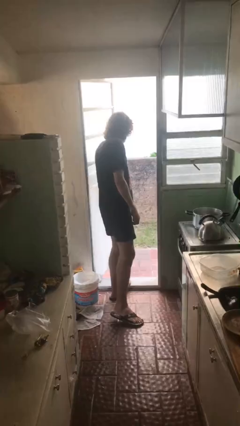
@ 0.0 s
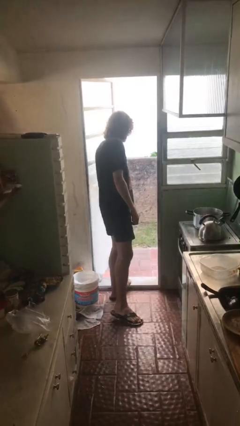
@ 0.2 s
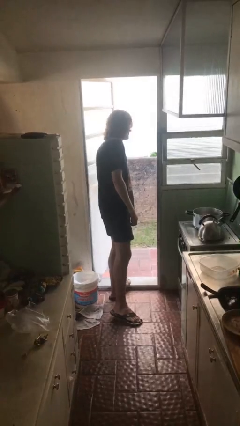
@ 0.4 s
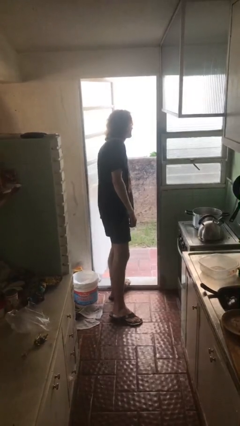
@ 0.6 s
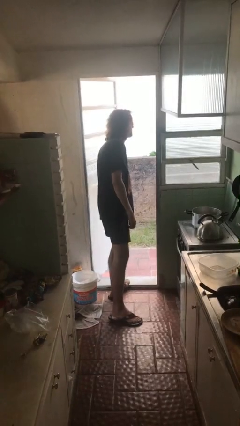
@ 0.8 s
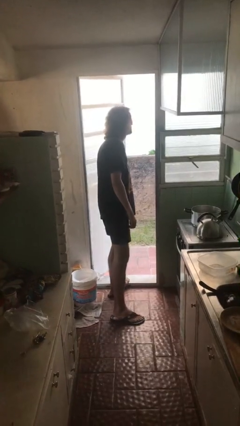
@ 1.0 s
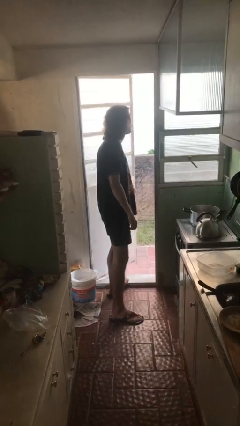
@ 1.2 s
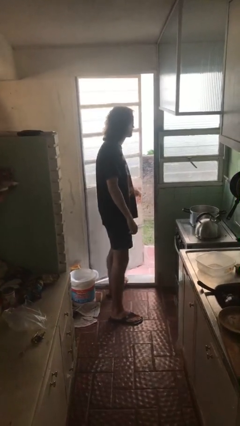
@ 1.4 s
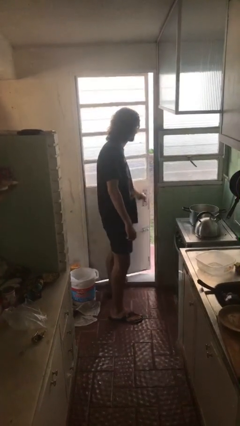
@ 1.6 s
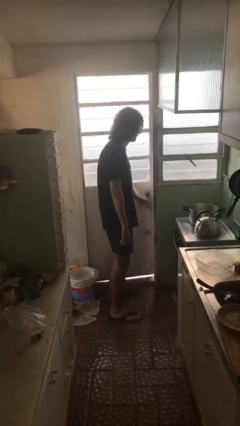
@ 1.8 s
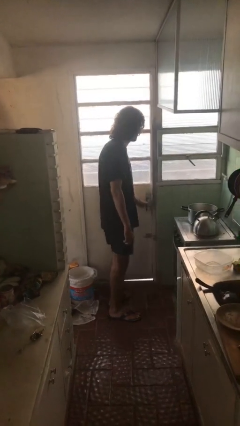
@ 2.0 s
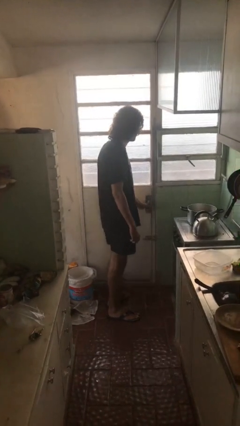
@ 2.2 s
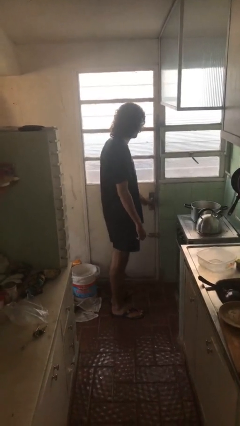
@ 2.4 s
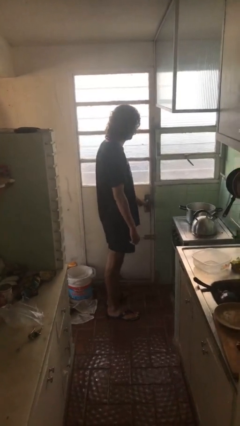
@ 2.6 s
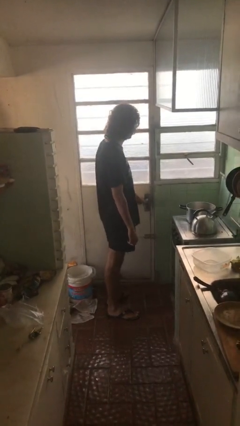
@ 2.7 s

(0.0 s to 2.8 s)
person closes facility door

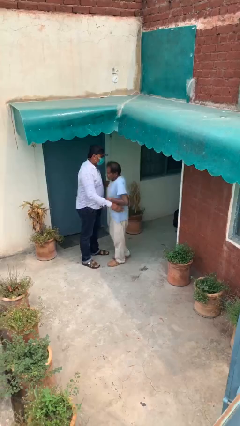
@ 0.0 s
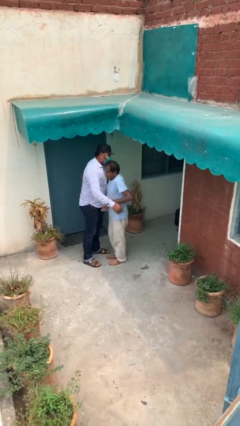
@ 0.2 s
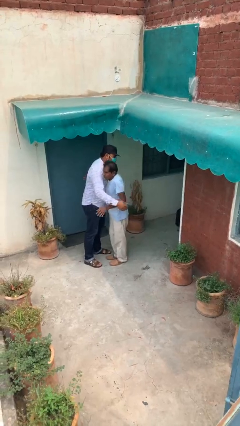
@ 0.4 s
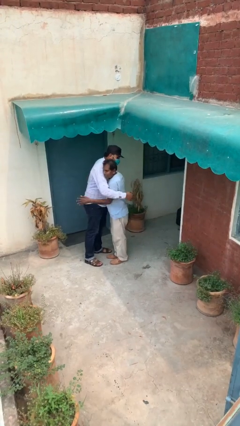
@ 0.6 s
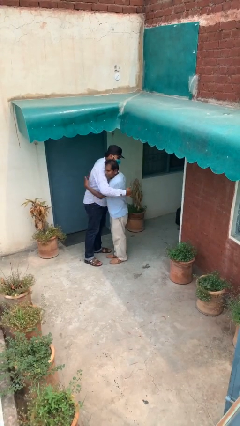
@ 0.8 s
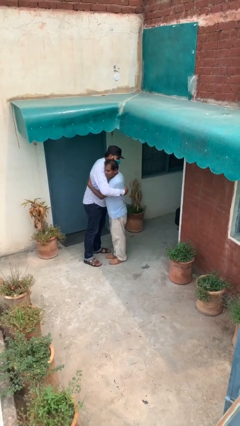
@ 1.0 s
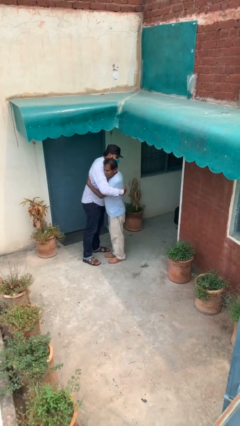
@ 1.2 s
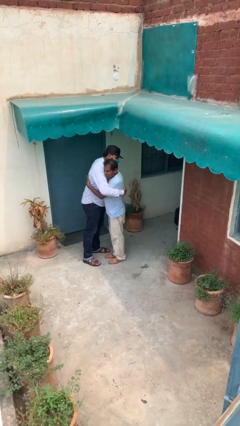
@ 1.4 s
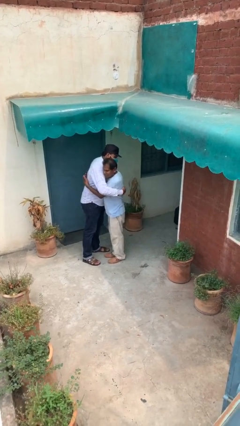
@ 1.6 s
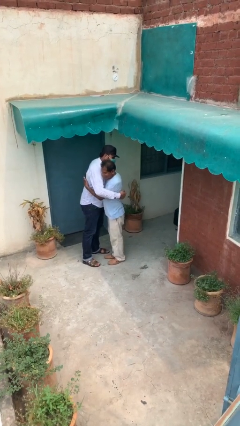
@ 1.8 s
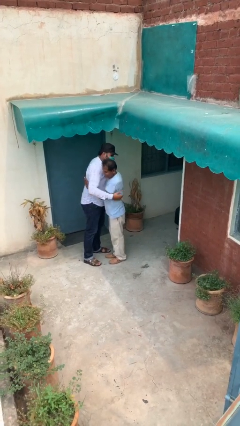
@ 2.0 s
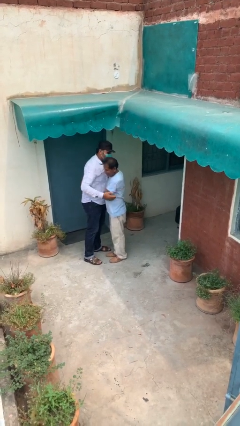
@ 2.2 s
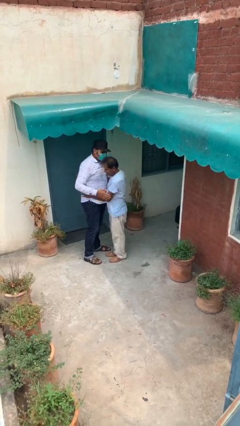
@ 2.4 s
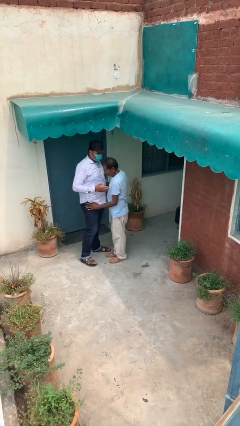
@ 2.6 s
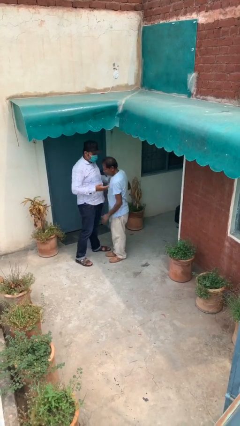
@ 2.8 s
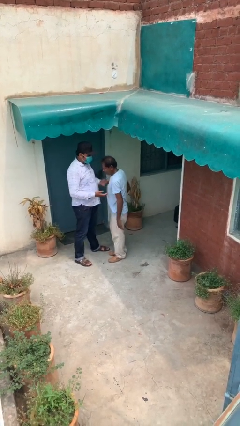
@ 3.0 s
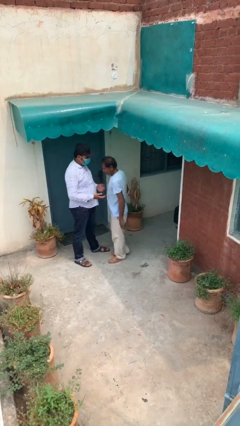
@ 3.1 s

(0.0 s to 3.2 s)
person embraces person

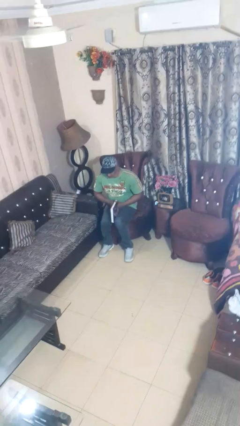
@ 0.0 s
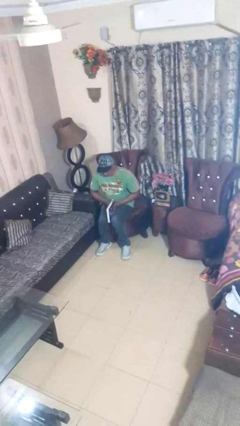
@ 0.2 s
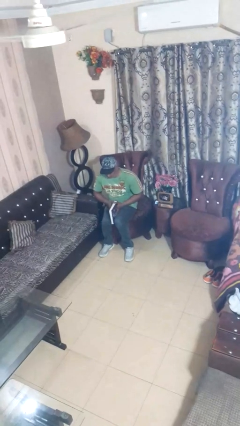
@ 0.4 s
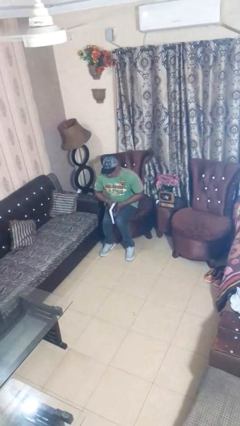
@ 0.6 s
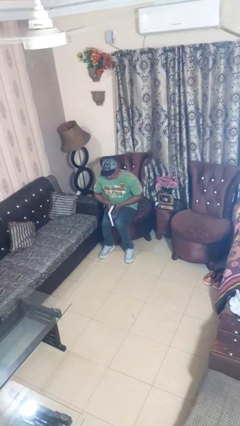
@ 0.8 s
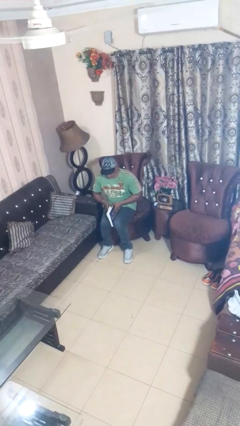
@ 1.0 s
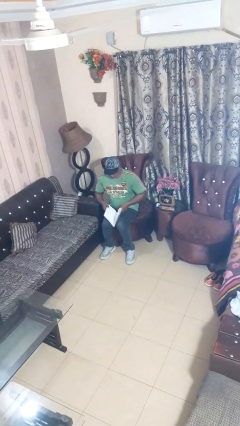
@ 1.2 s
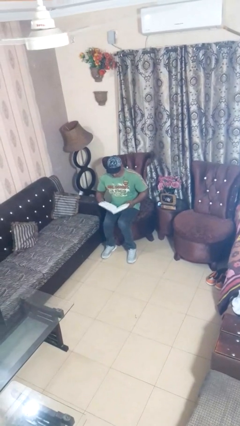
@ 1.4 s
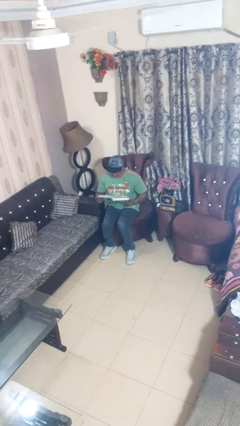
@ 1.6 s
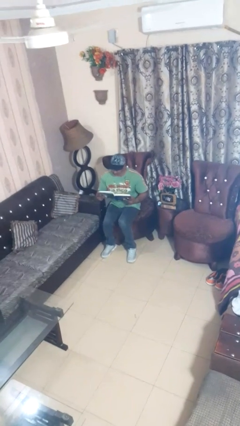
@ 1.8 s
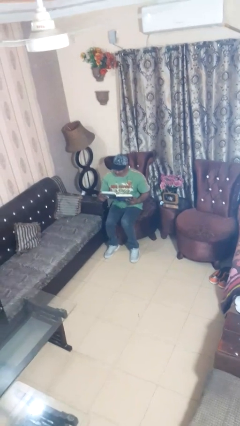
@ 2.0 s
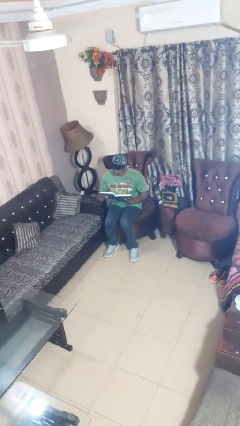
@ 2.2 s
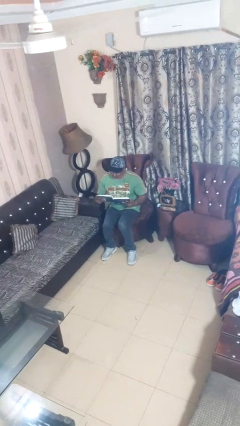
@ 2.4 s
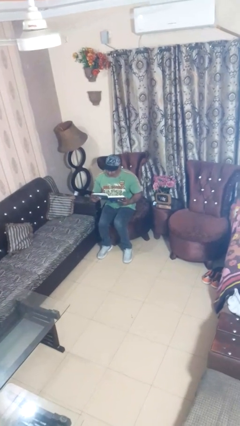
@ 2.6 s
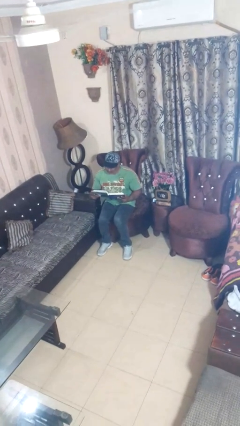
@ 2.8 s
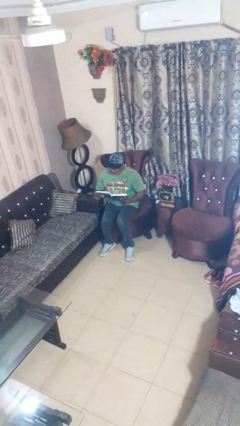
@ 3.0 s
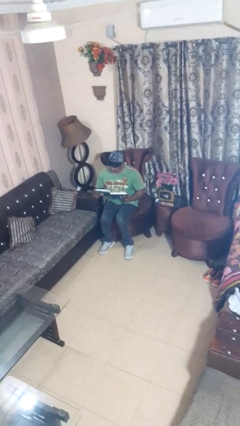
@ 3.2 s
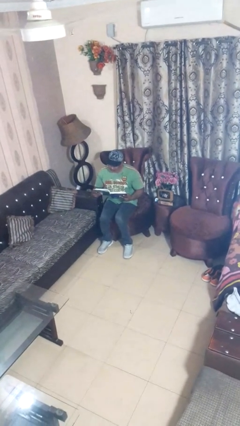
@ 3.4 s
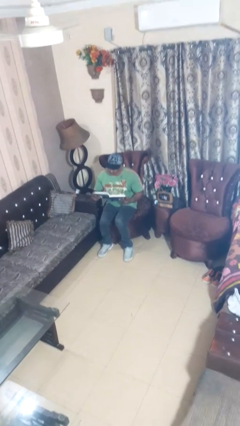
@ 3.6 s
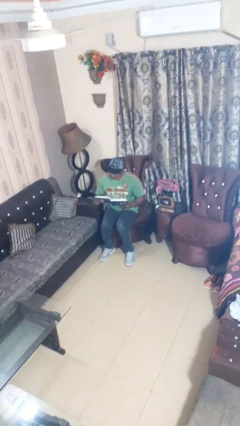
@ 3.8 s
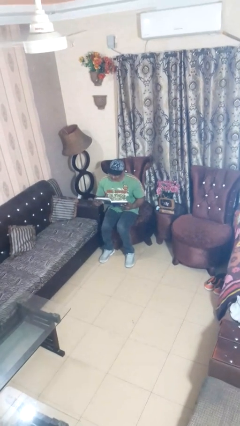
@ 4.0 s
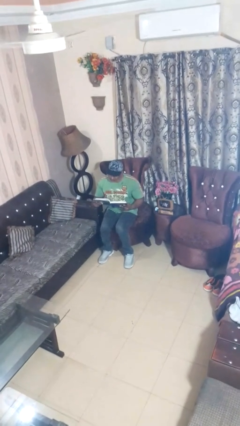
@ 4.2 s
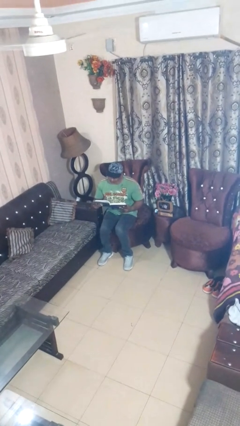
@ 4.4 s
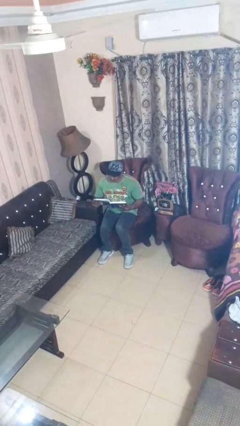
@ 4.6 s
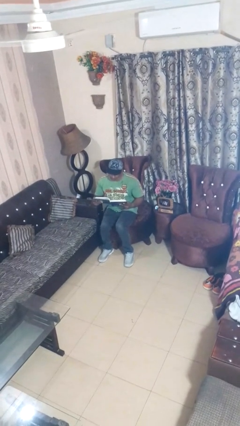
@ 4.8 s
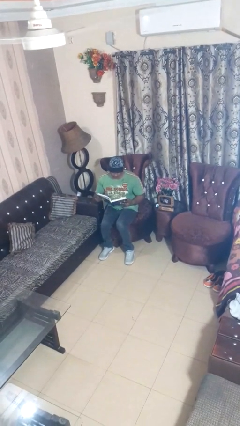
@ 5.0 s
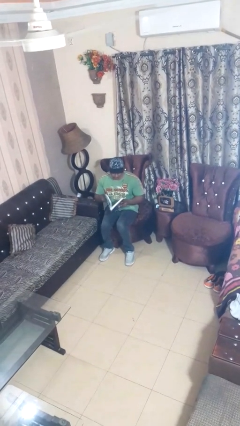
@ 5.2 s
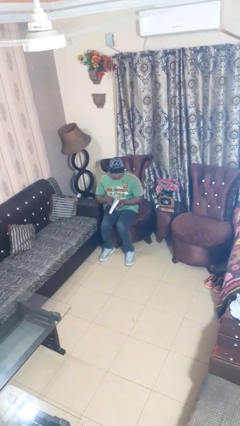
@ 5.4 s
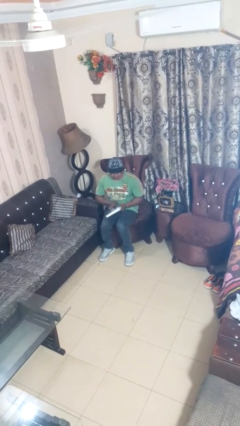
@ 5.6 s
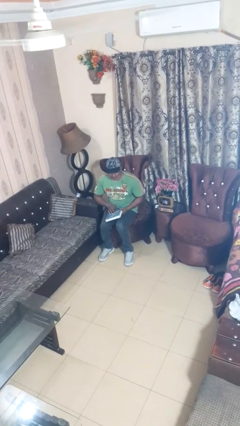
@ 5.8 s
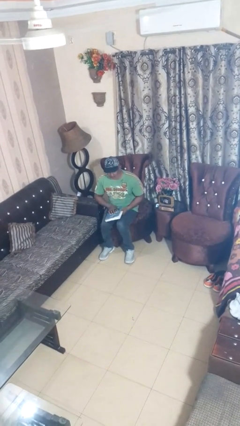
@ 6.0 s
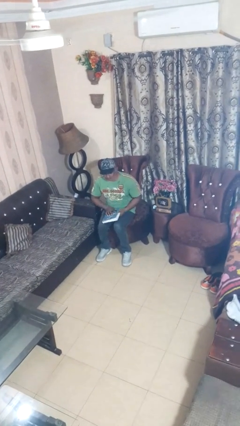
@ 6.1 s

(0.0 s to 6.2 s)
person reads magazine

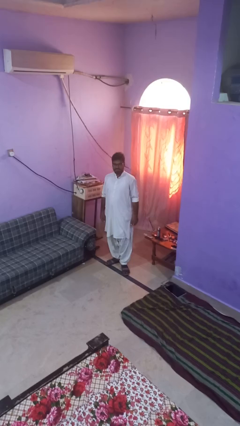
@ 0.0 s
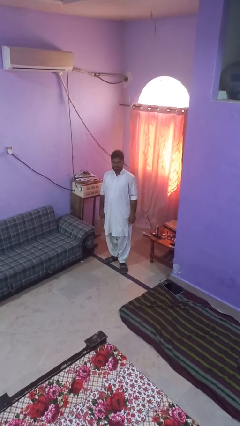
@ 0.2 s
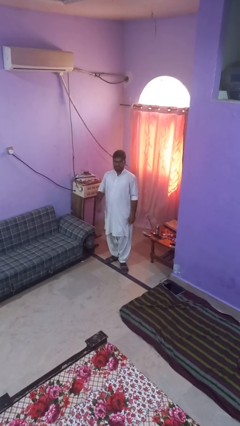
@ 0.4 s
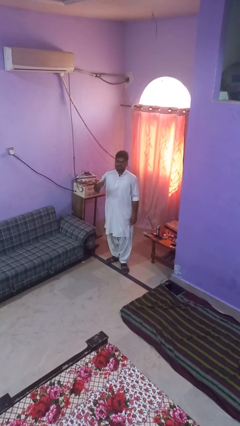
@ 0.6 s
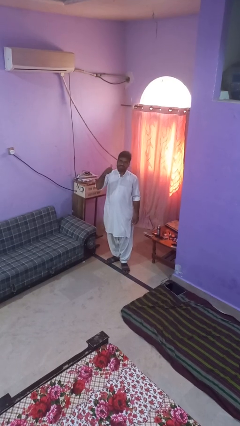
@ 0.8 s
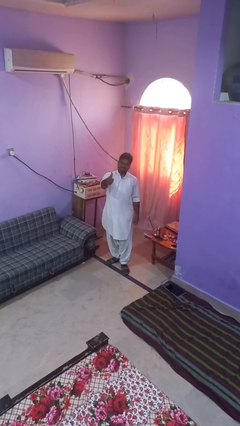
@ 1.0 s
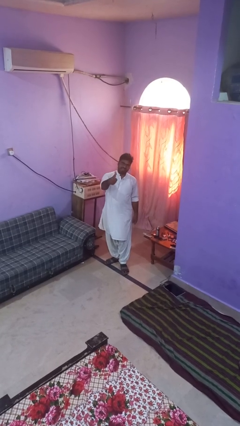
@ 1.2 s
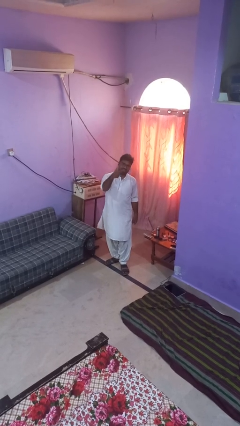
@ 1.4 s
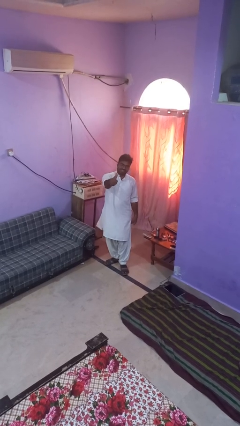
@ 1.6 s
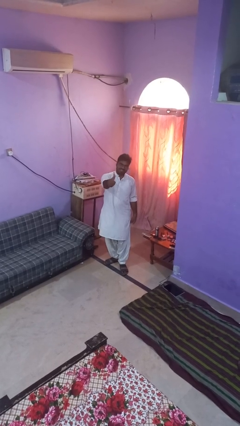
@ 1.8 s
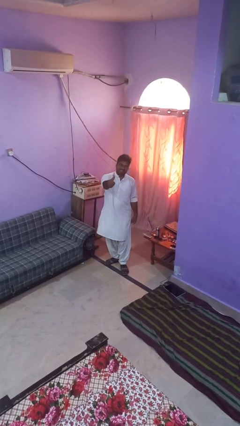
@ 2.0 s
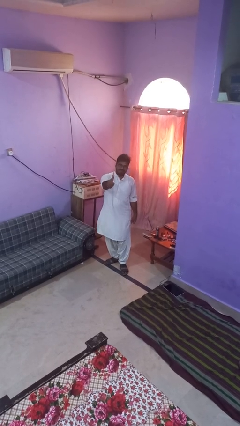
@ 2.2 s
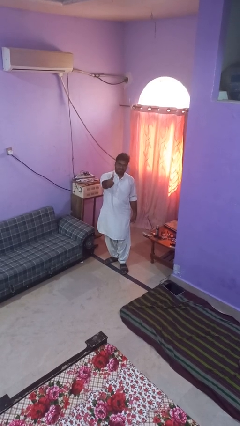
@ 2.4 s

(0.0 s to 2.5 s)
person gestures thumbs up

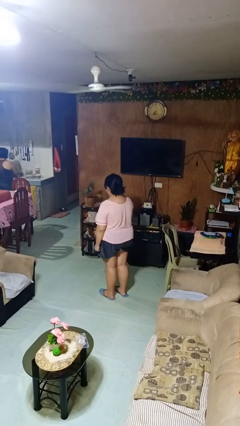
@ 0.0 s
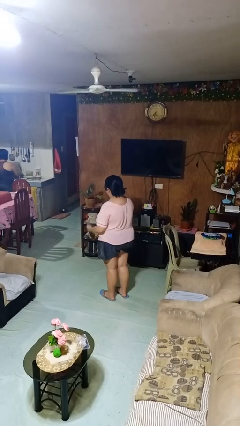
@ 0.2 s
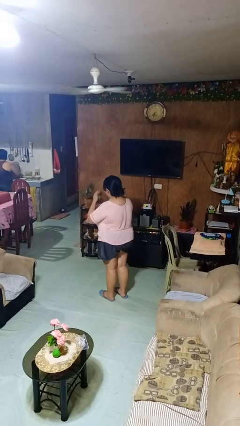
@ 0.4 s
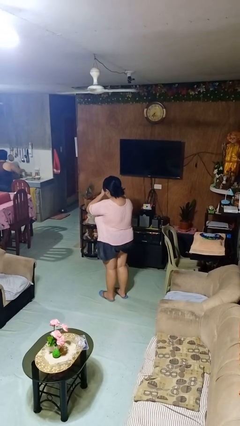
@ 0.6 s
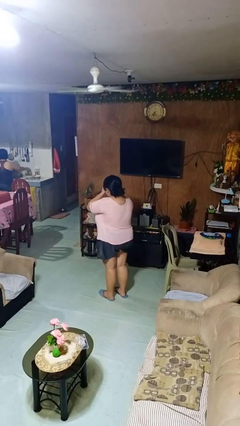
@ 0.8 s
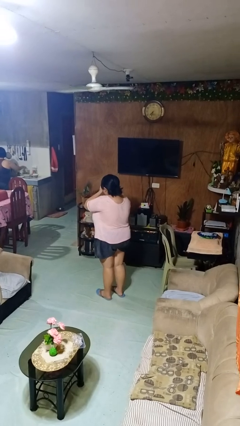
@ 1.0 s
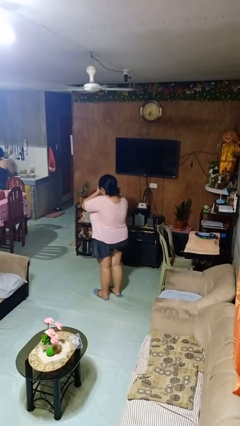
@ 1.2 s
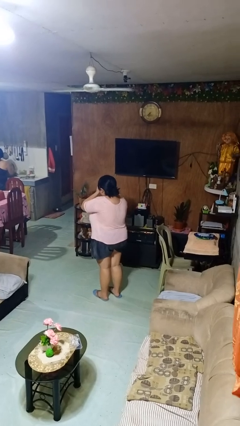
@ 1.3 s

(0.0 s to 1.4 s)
person yawns

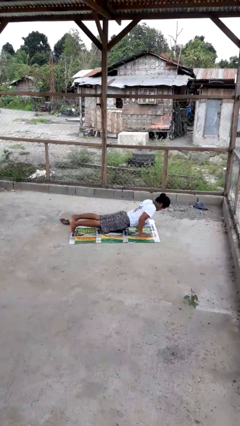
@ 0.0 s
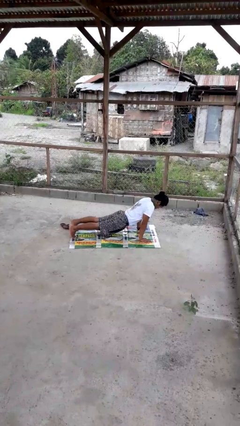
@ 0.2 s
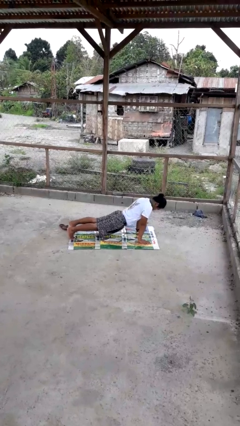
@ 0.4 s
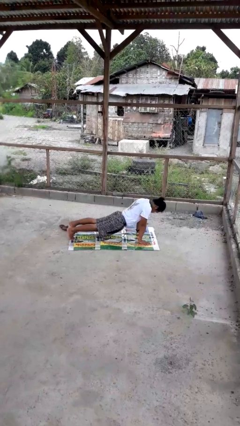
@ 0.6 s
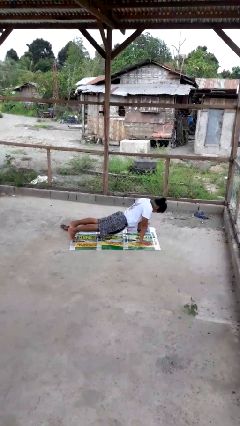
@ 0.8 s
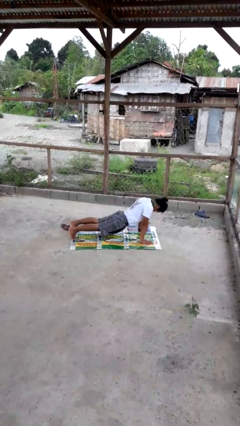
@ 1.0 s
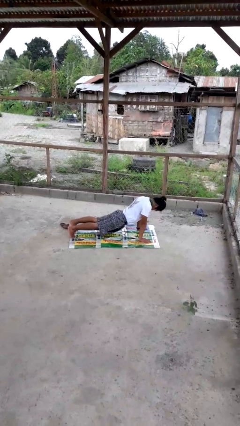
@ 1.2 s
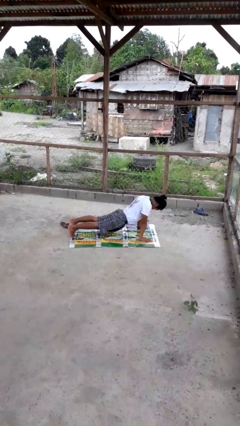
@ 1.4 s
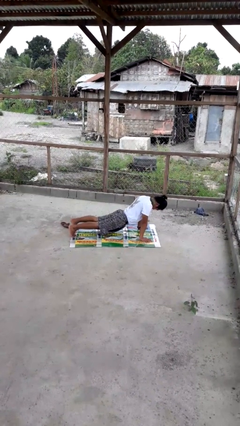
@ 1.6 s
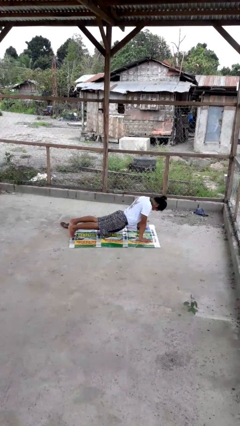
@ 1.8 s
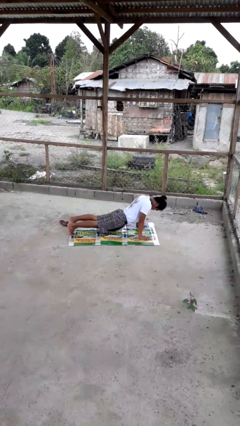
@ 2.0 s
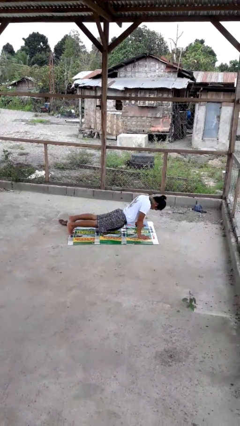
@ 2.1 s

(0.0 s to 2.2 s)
person exercises with pushup
